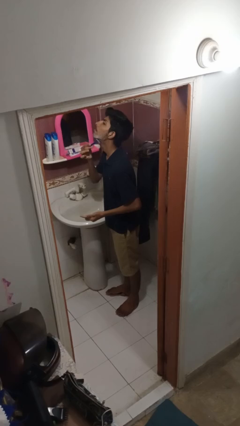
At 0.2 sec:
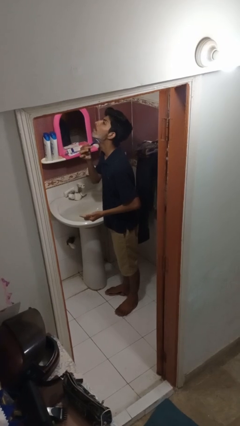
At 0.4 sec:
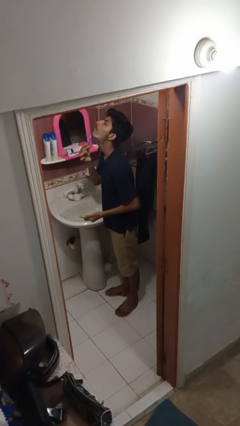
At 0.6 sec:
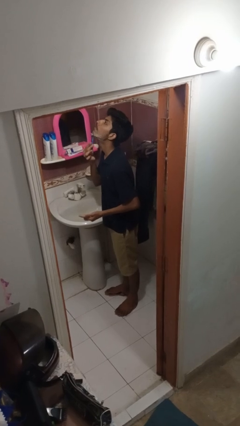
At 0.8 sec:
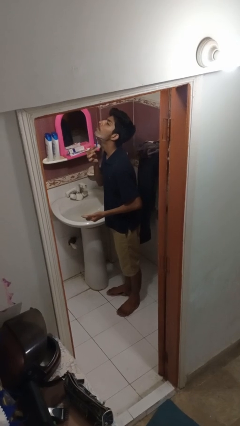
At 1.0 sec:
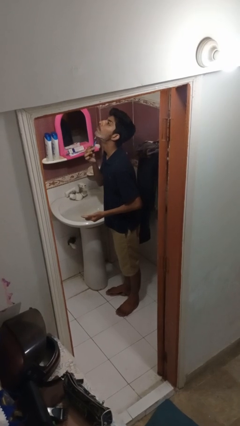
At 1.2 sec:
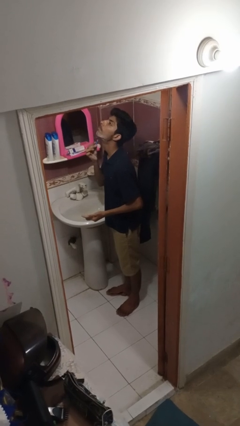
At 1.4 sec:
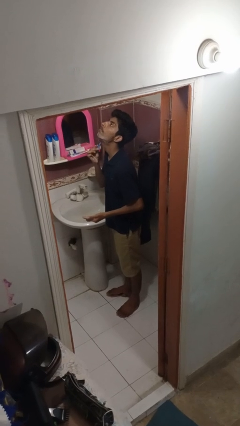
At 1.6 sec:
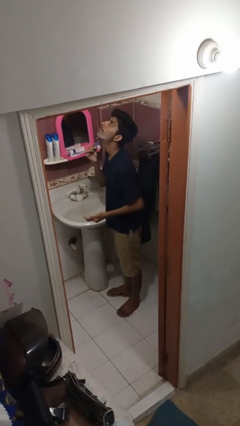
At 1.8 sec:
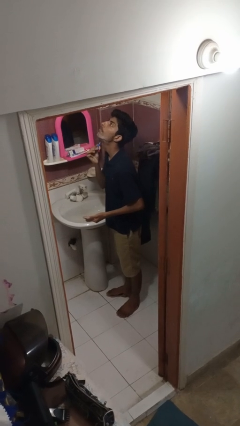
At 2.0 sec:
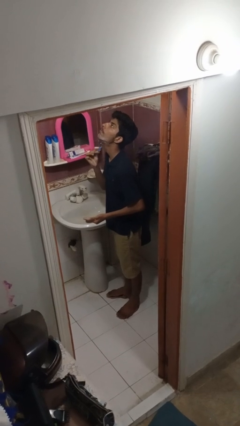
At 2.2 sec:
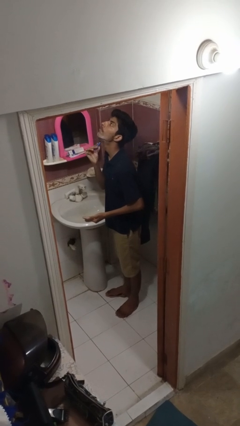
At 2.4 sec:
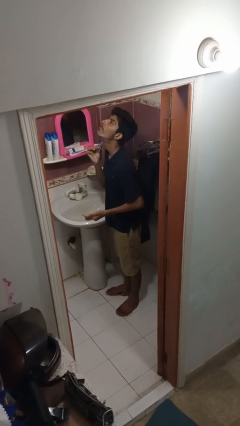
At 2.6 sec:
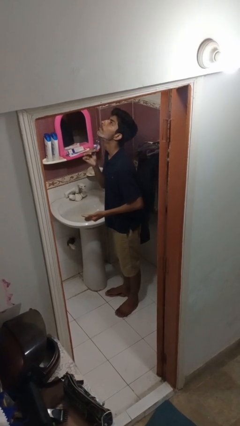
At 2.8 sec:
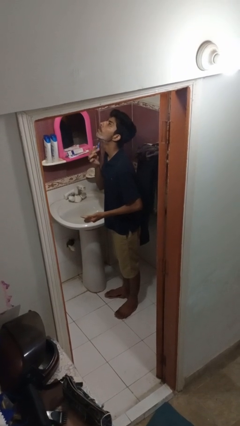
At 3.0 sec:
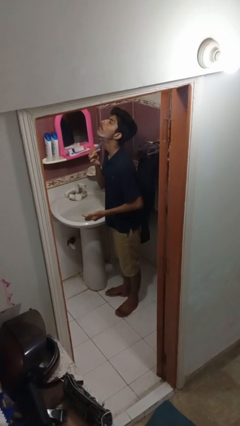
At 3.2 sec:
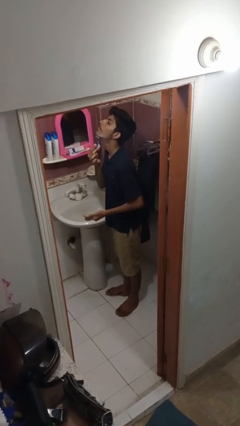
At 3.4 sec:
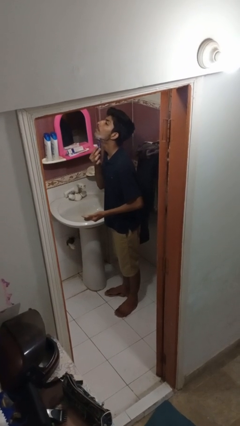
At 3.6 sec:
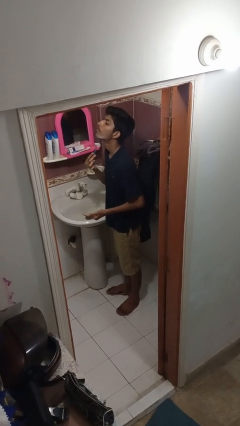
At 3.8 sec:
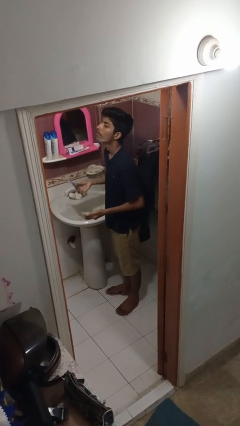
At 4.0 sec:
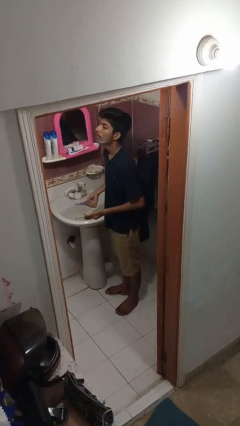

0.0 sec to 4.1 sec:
person shaves face

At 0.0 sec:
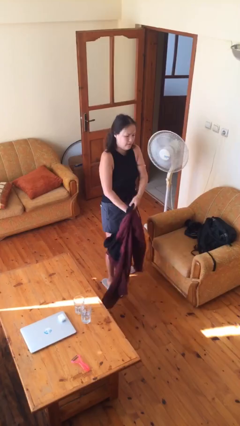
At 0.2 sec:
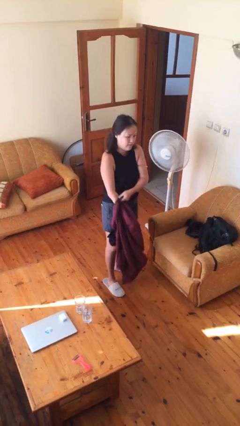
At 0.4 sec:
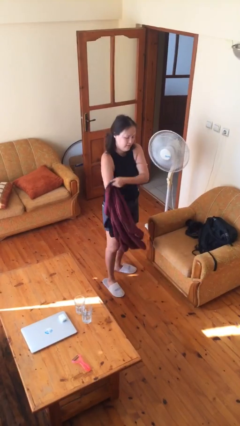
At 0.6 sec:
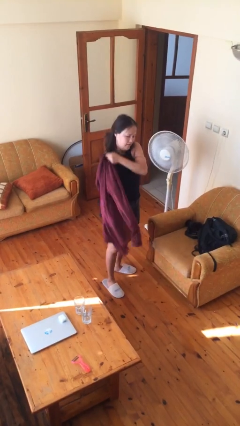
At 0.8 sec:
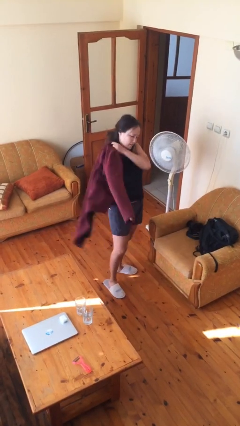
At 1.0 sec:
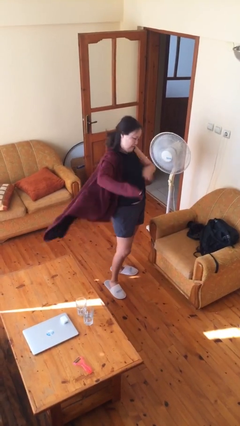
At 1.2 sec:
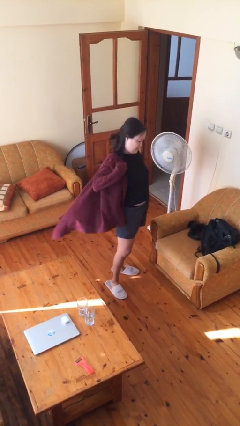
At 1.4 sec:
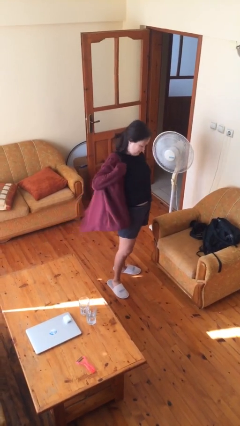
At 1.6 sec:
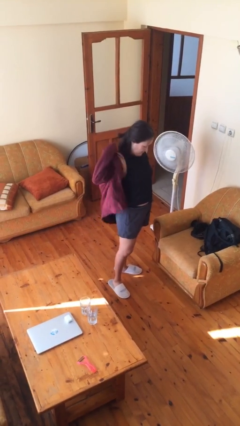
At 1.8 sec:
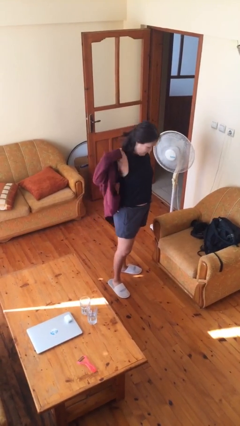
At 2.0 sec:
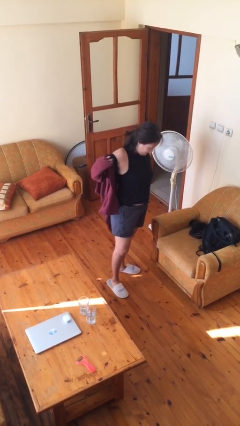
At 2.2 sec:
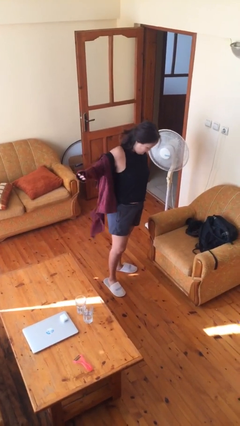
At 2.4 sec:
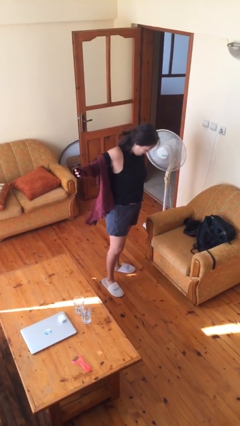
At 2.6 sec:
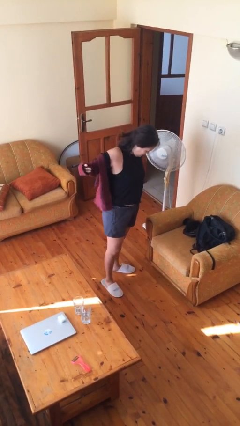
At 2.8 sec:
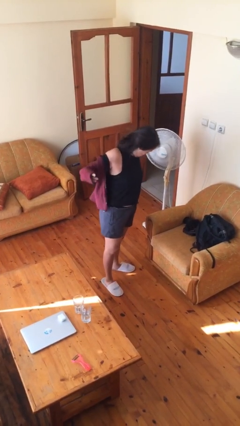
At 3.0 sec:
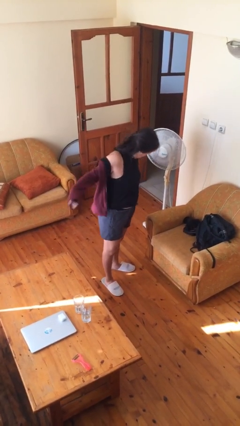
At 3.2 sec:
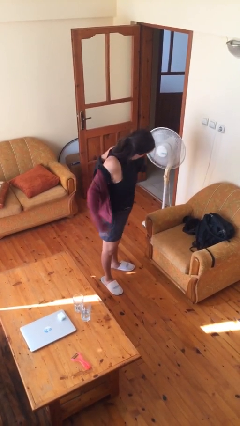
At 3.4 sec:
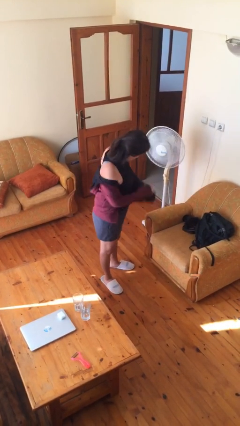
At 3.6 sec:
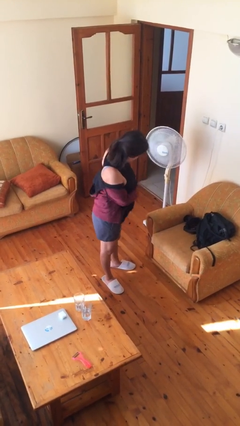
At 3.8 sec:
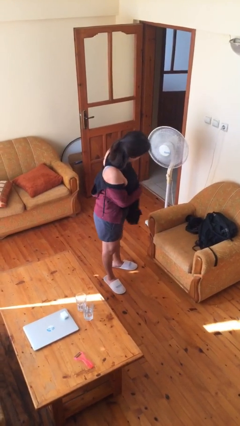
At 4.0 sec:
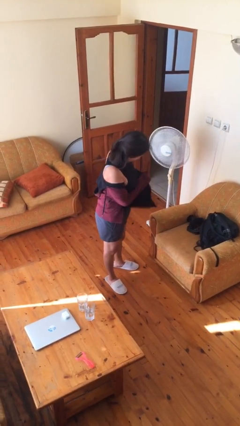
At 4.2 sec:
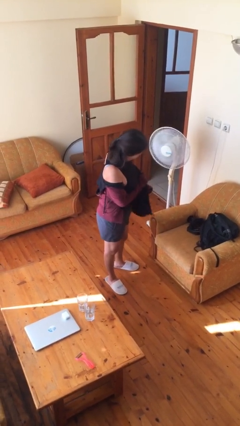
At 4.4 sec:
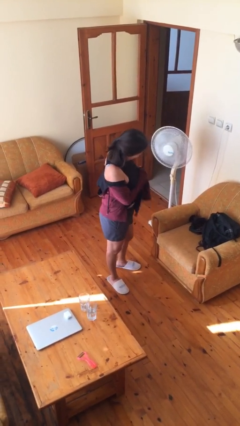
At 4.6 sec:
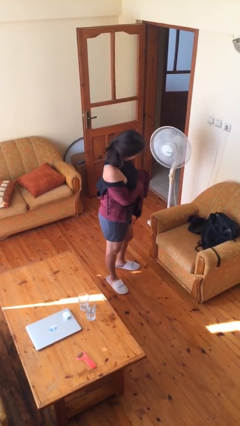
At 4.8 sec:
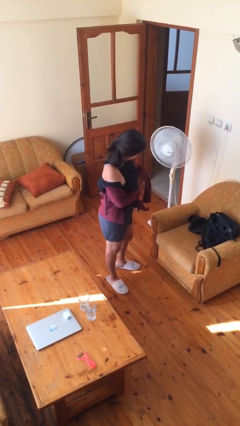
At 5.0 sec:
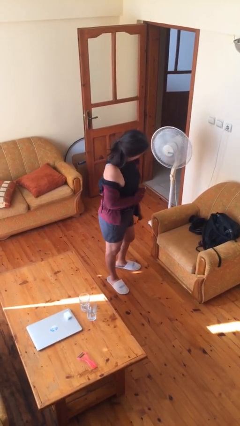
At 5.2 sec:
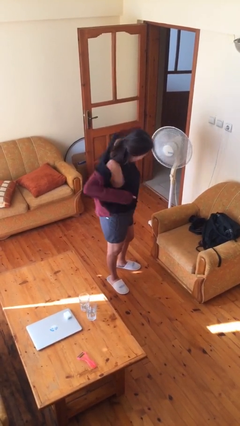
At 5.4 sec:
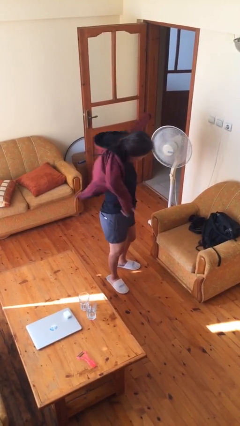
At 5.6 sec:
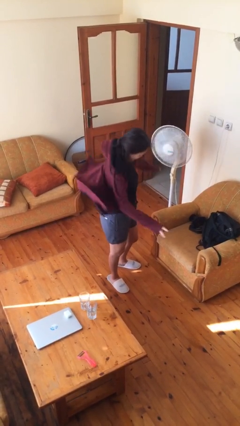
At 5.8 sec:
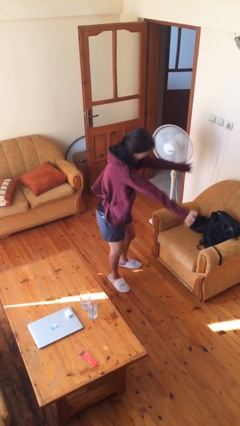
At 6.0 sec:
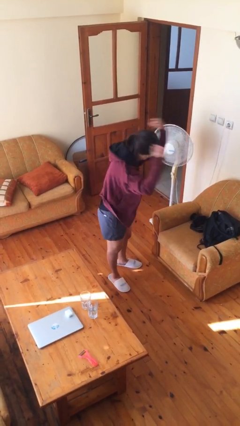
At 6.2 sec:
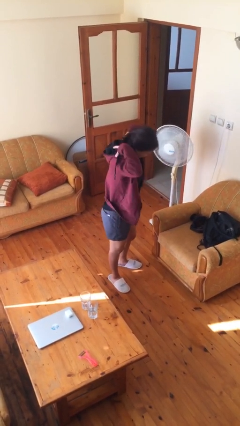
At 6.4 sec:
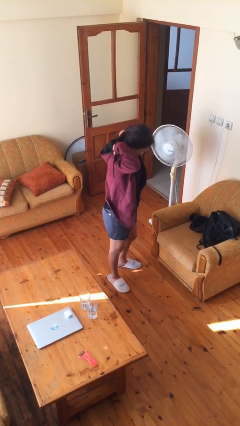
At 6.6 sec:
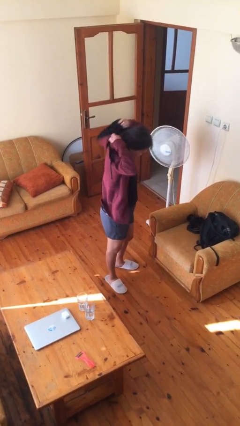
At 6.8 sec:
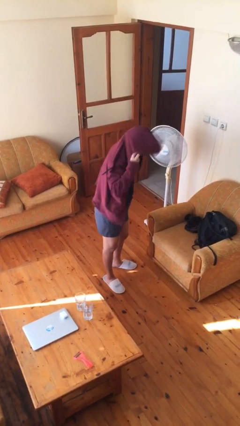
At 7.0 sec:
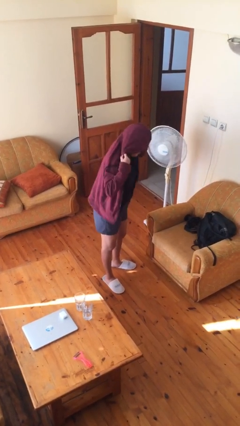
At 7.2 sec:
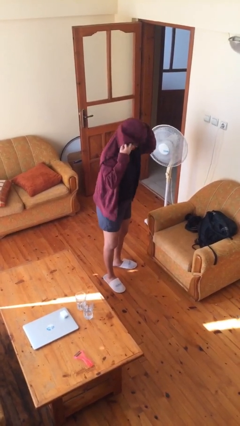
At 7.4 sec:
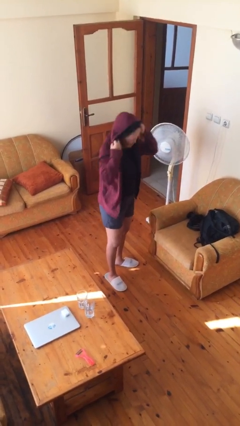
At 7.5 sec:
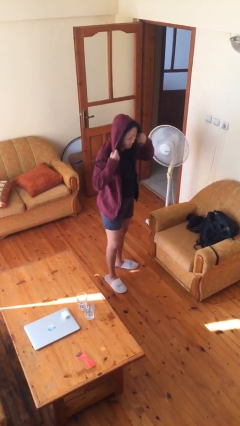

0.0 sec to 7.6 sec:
person puts on hoodie

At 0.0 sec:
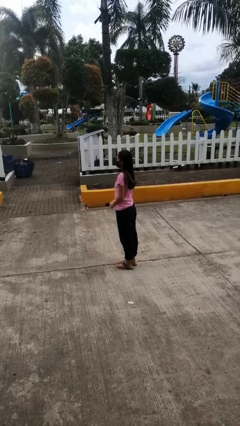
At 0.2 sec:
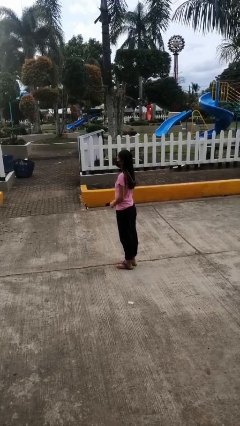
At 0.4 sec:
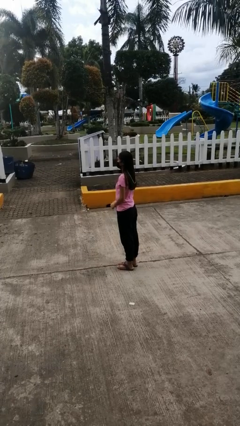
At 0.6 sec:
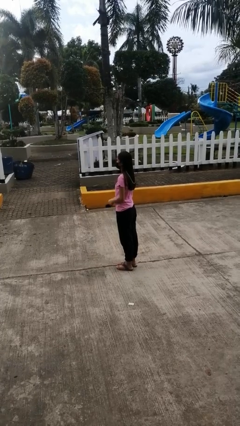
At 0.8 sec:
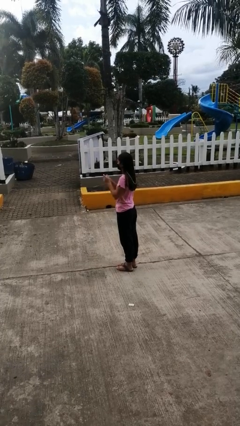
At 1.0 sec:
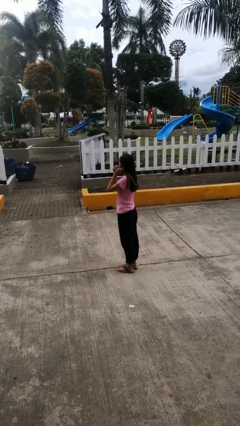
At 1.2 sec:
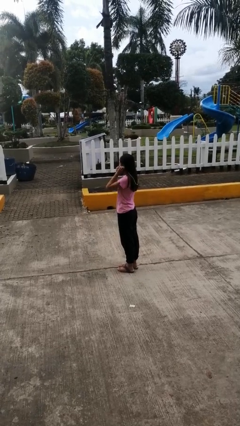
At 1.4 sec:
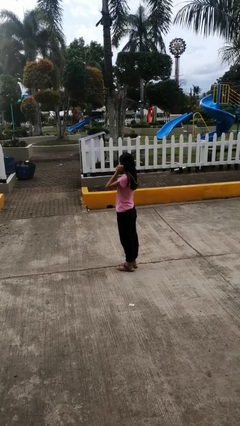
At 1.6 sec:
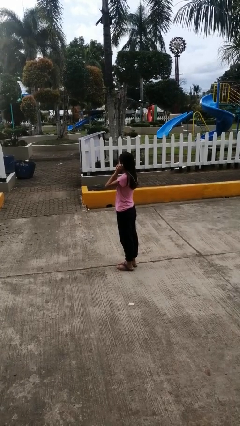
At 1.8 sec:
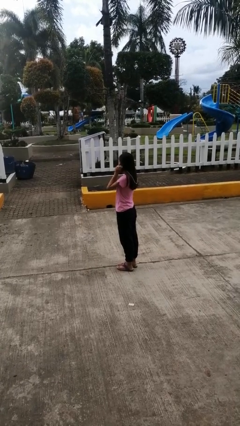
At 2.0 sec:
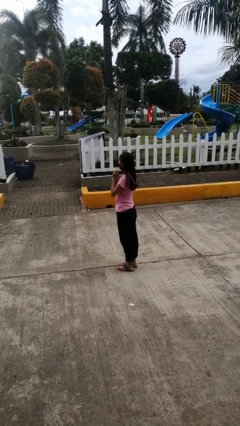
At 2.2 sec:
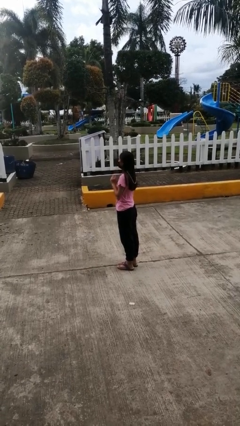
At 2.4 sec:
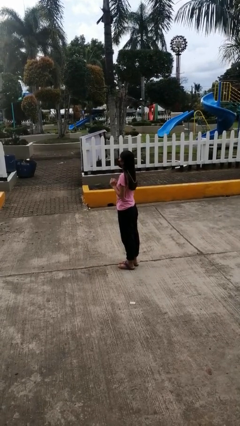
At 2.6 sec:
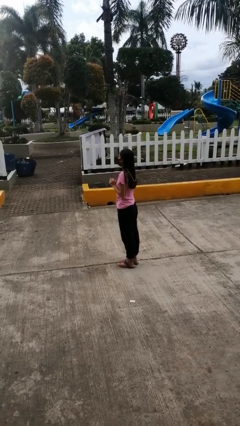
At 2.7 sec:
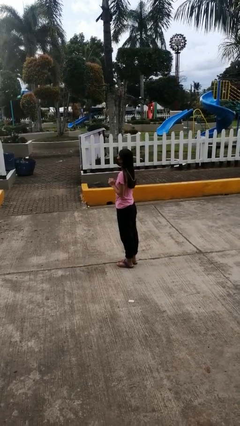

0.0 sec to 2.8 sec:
person puts on earrings

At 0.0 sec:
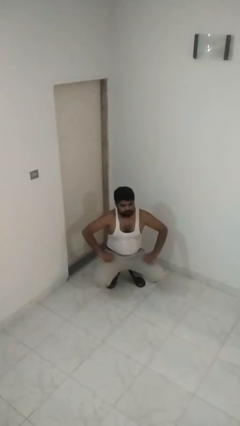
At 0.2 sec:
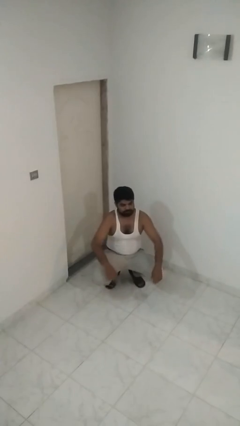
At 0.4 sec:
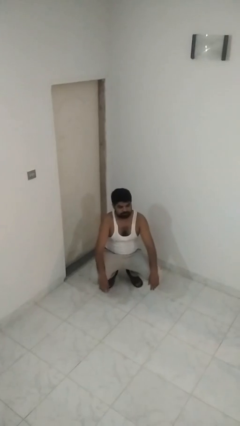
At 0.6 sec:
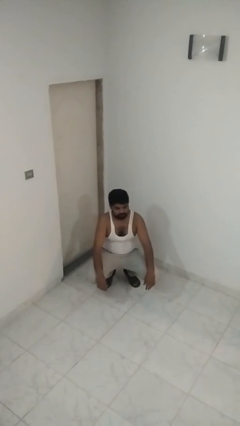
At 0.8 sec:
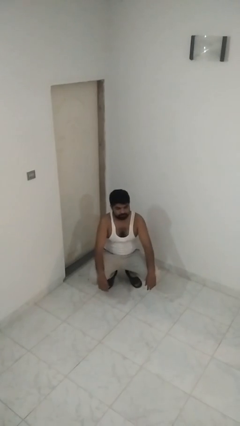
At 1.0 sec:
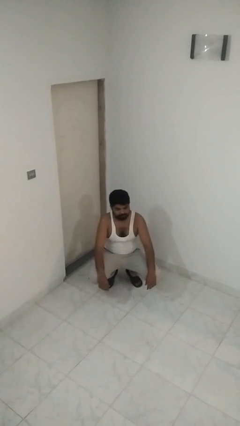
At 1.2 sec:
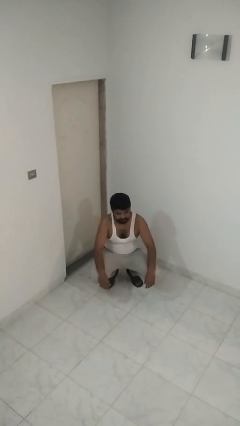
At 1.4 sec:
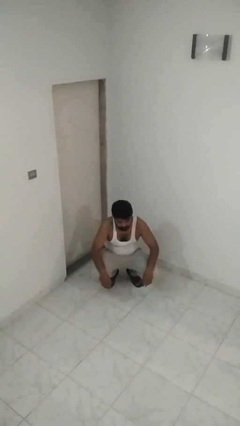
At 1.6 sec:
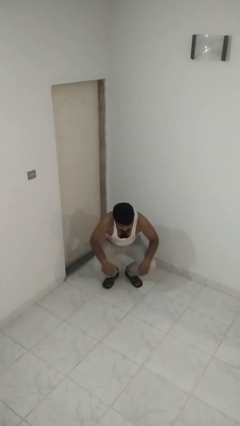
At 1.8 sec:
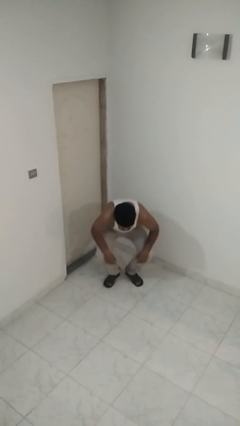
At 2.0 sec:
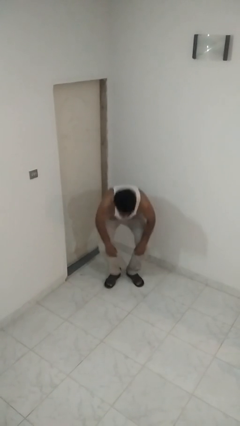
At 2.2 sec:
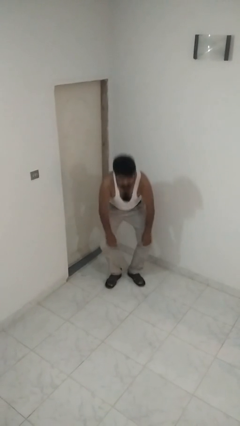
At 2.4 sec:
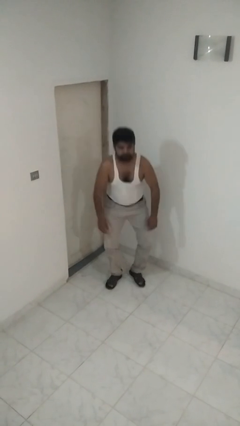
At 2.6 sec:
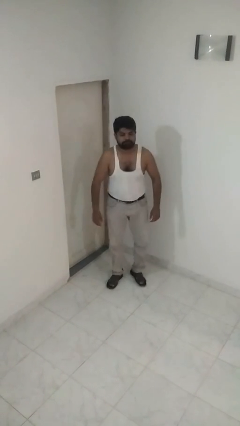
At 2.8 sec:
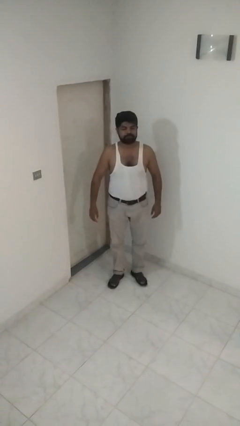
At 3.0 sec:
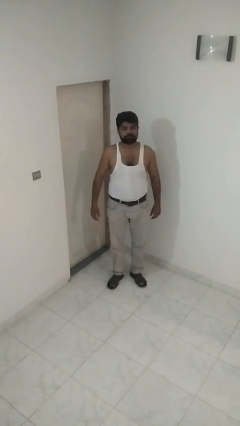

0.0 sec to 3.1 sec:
person stands up

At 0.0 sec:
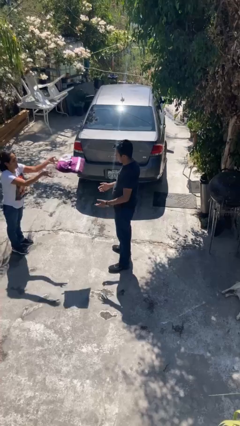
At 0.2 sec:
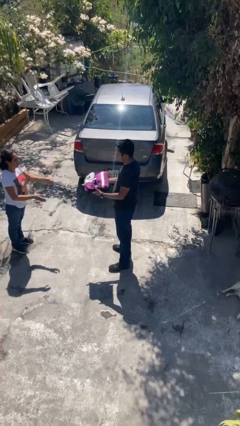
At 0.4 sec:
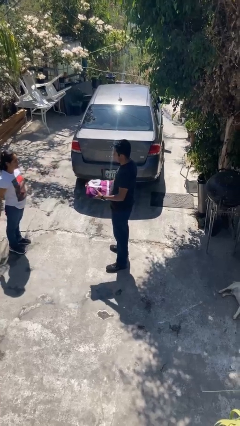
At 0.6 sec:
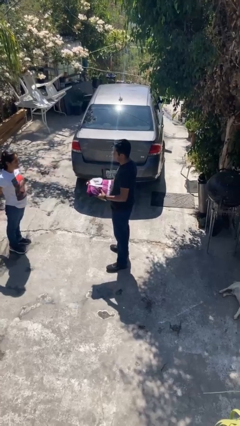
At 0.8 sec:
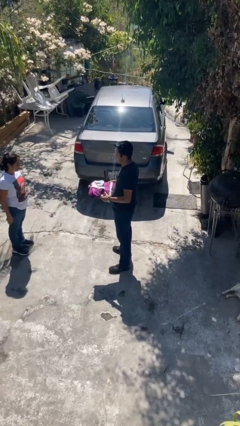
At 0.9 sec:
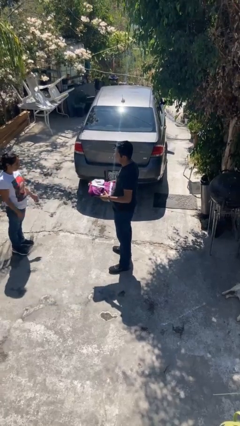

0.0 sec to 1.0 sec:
person catches object from person
